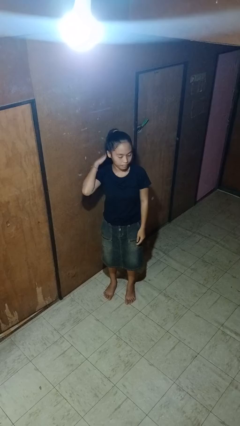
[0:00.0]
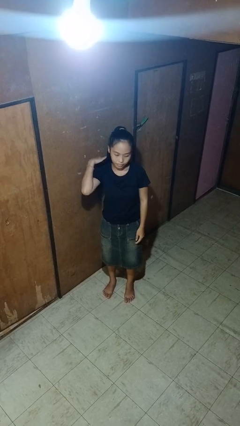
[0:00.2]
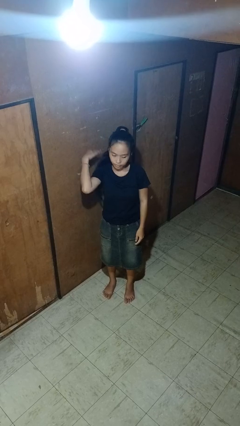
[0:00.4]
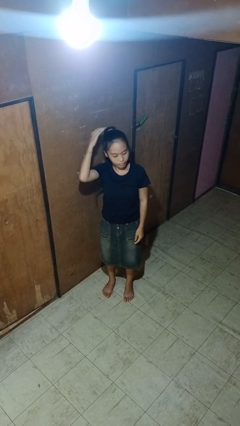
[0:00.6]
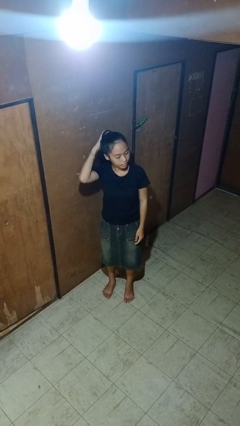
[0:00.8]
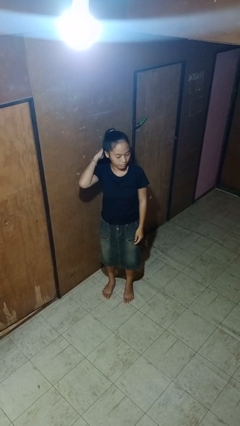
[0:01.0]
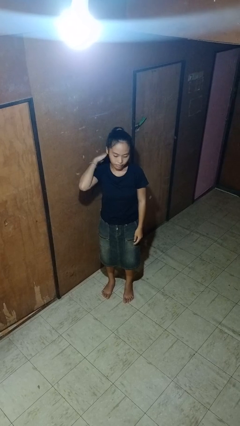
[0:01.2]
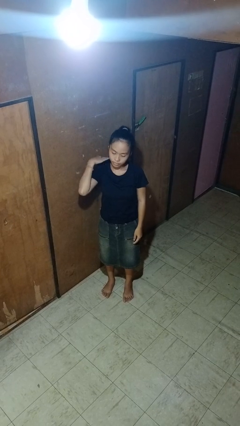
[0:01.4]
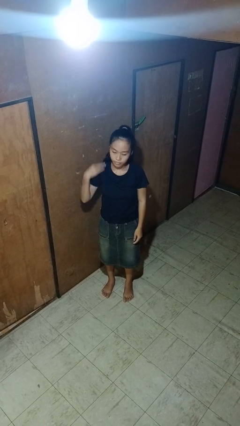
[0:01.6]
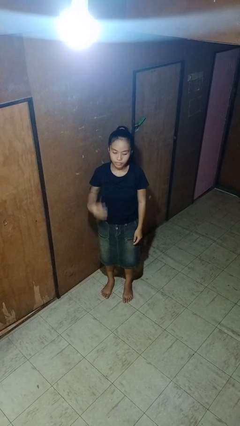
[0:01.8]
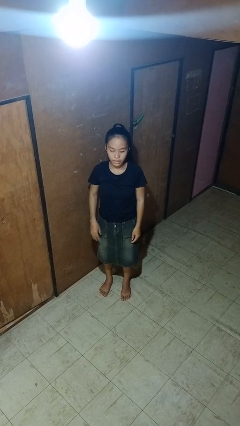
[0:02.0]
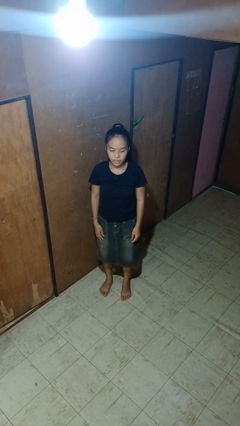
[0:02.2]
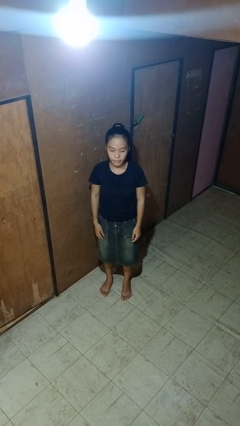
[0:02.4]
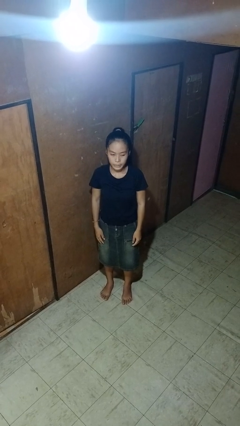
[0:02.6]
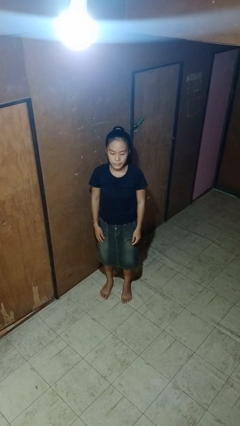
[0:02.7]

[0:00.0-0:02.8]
person strokes hair

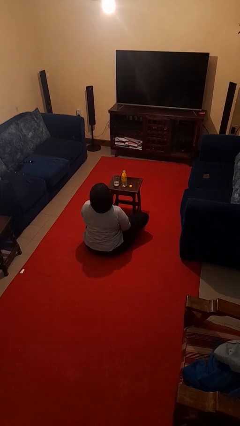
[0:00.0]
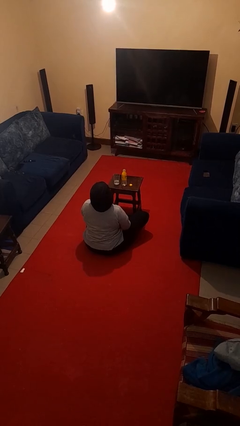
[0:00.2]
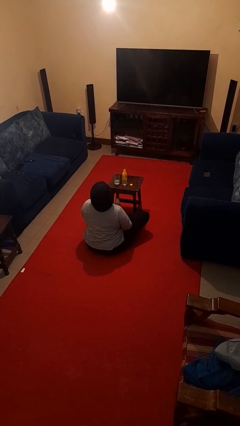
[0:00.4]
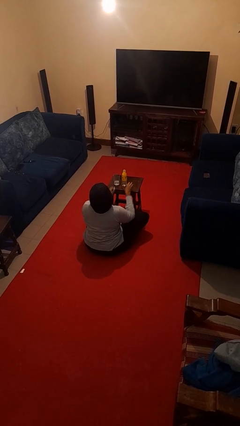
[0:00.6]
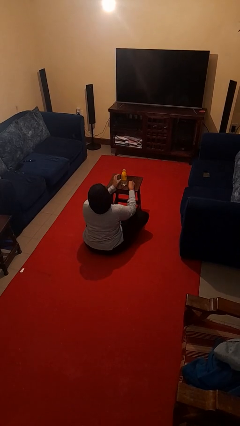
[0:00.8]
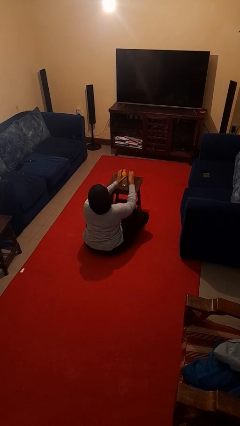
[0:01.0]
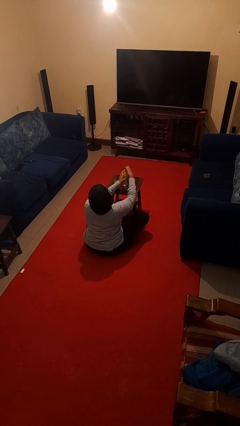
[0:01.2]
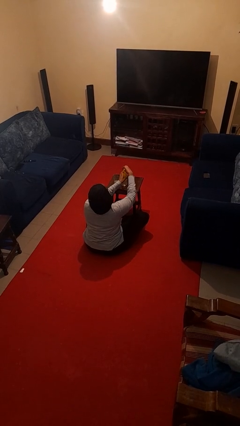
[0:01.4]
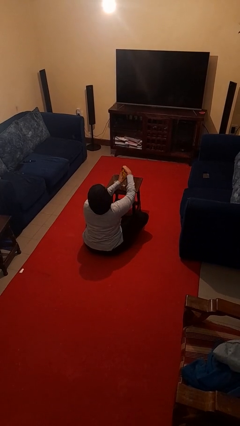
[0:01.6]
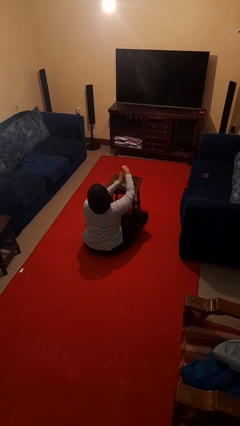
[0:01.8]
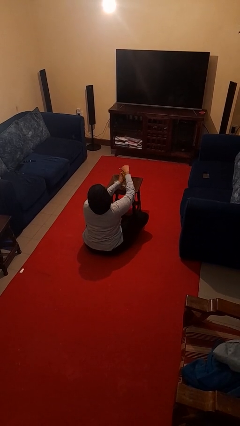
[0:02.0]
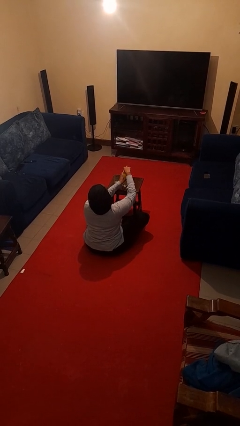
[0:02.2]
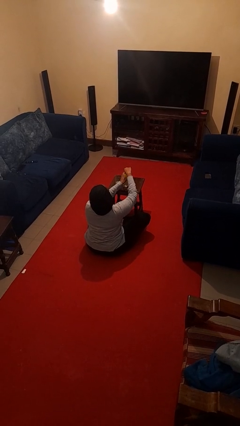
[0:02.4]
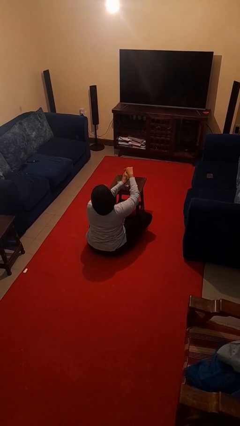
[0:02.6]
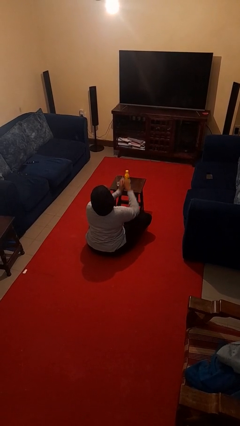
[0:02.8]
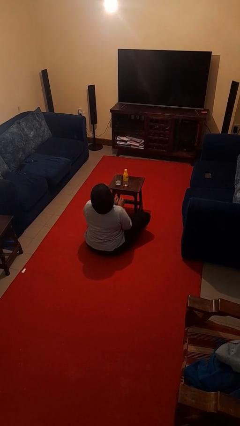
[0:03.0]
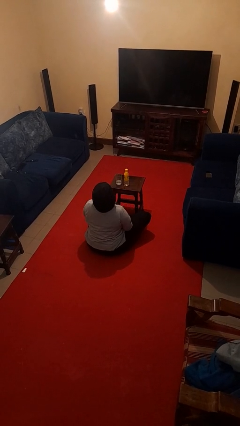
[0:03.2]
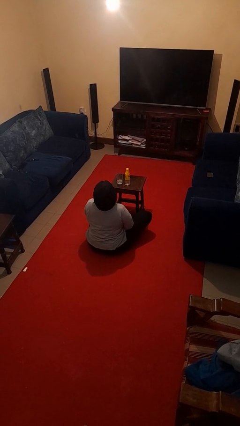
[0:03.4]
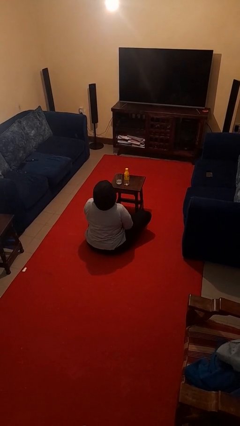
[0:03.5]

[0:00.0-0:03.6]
person screws lid to bottle

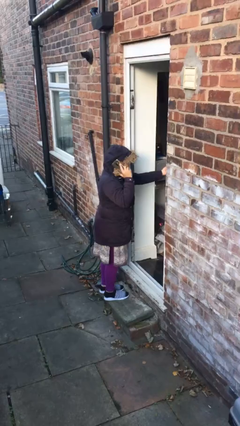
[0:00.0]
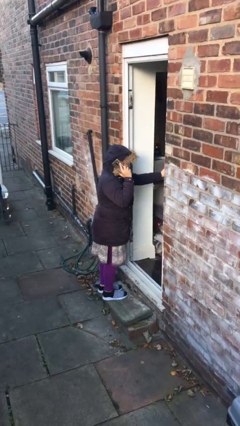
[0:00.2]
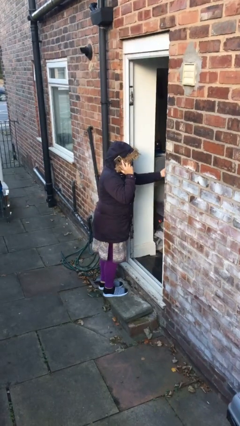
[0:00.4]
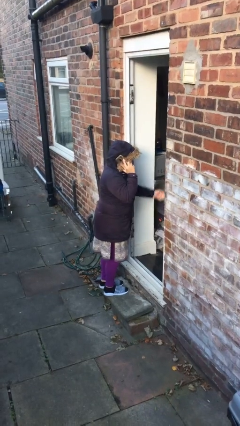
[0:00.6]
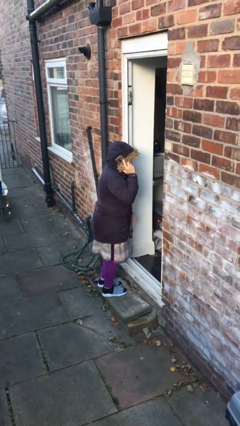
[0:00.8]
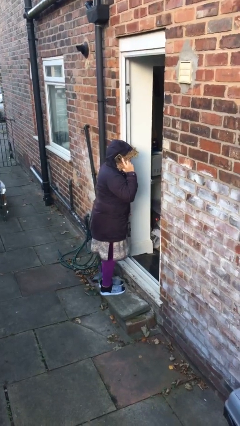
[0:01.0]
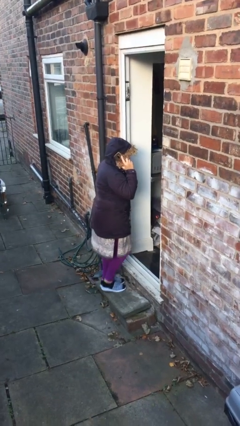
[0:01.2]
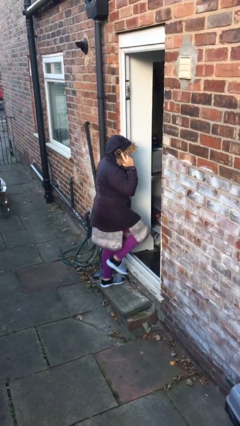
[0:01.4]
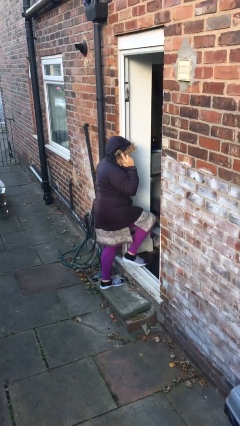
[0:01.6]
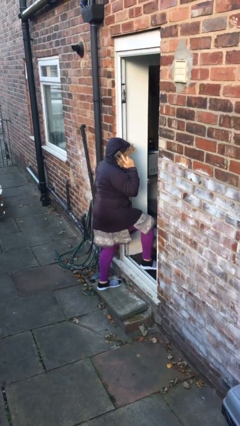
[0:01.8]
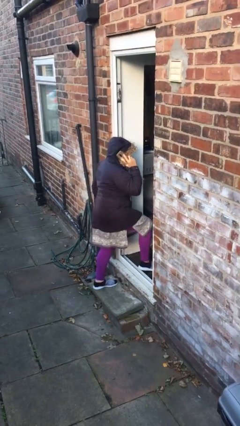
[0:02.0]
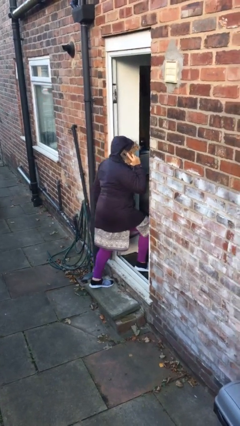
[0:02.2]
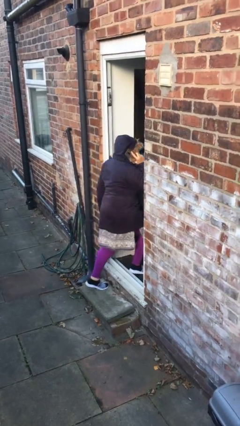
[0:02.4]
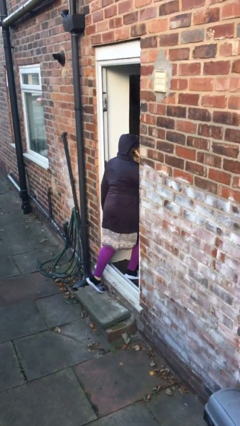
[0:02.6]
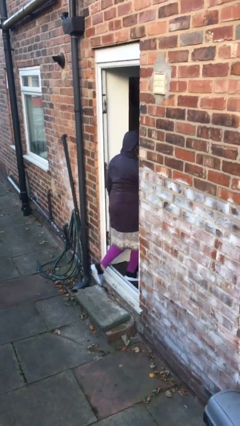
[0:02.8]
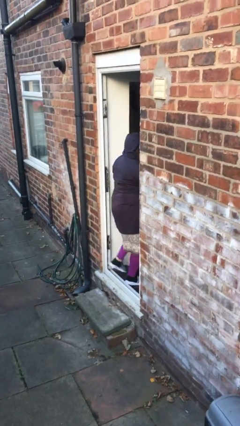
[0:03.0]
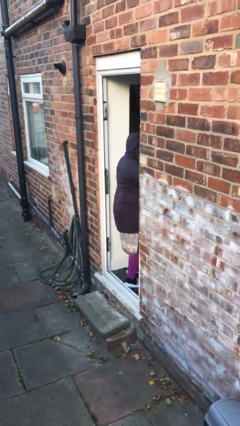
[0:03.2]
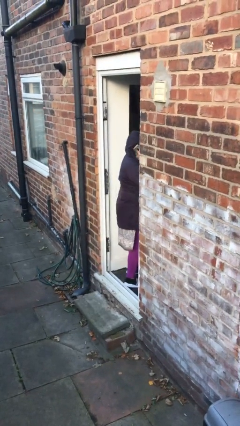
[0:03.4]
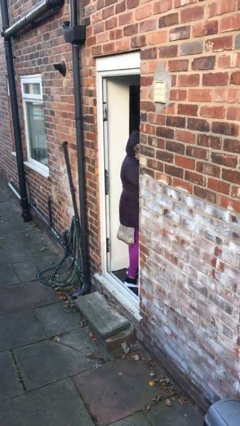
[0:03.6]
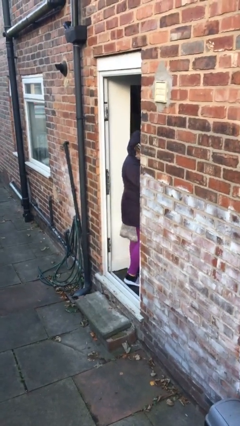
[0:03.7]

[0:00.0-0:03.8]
person exits scene through structure

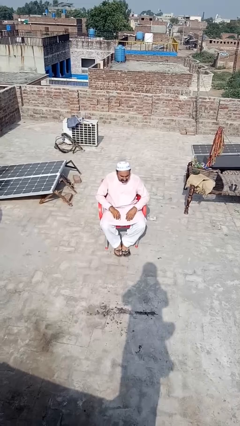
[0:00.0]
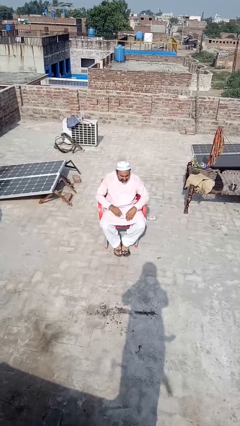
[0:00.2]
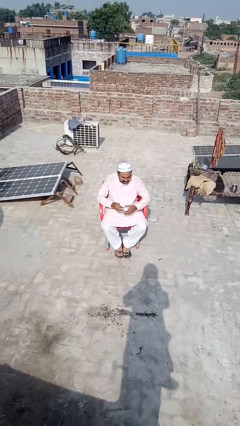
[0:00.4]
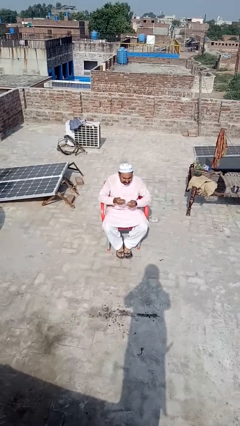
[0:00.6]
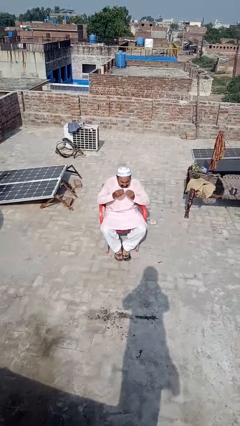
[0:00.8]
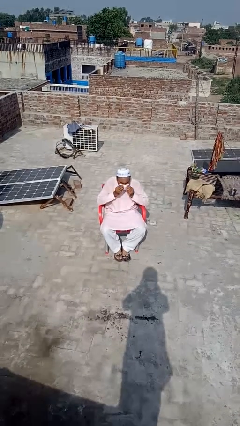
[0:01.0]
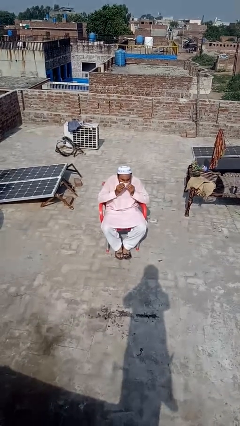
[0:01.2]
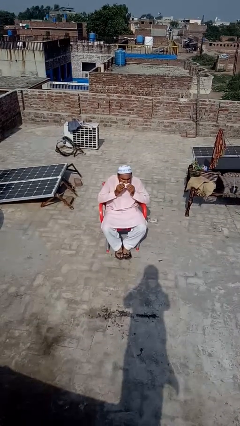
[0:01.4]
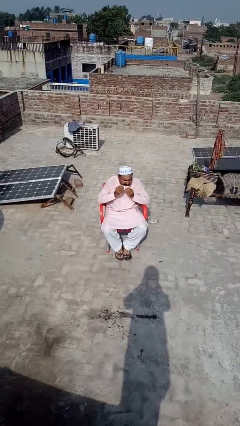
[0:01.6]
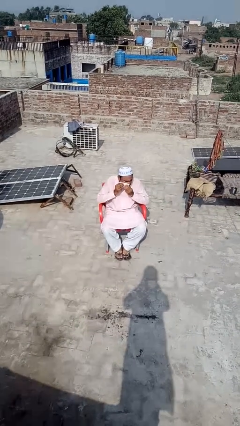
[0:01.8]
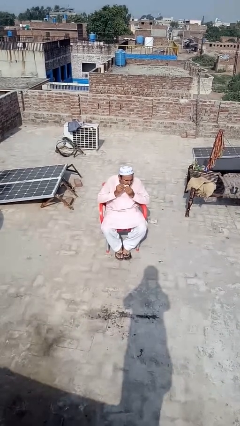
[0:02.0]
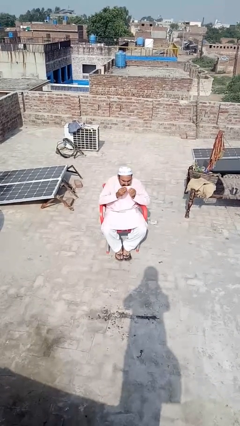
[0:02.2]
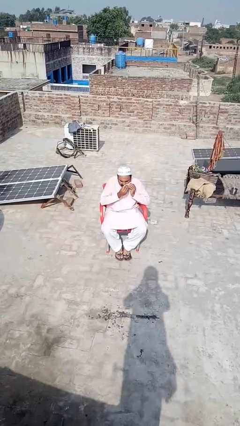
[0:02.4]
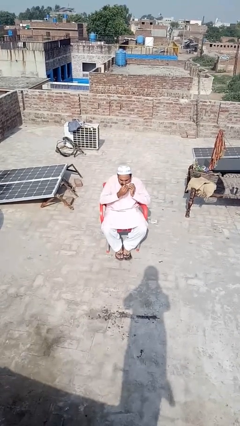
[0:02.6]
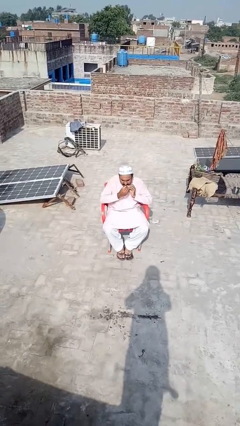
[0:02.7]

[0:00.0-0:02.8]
person wipes mouth with napkin

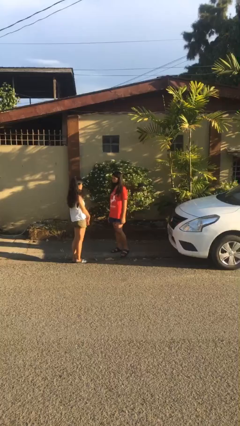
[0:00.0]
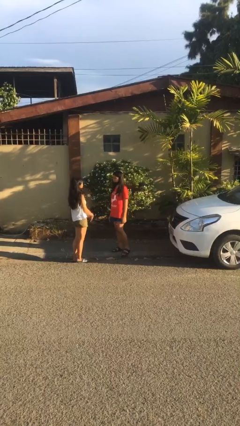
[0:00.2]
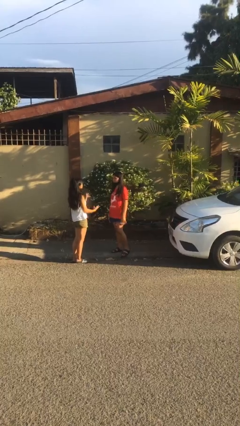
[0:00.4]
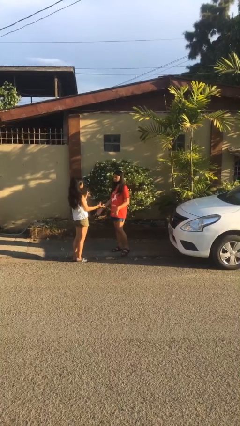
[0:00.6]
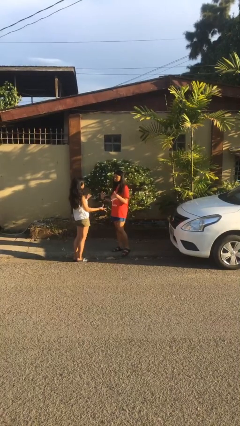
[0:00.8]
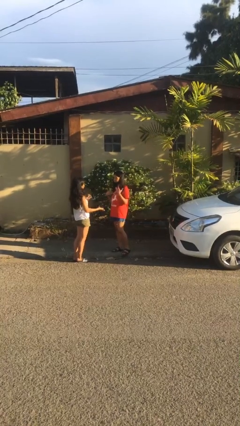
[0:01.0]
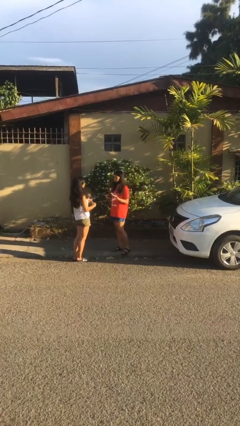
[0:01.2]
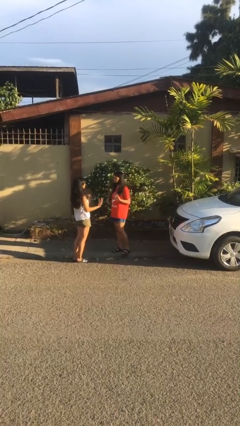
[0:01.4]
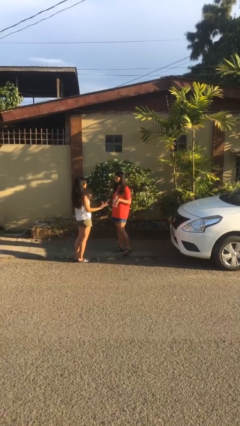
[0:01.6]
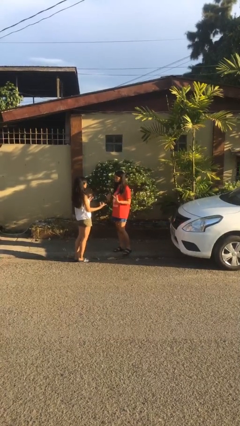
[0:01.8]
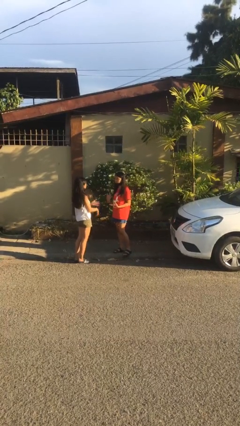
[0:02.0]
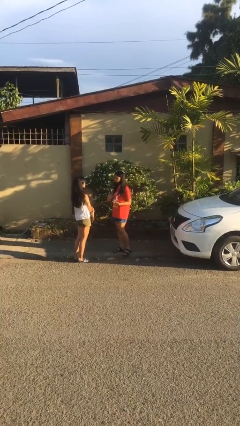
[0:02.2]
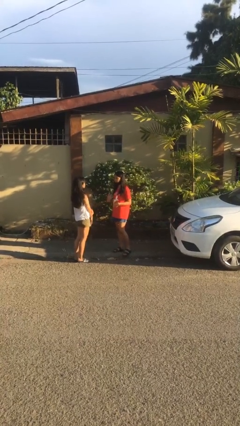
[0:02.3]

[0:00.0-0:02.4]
person talks to person

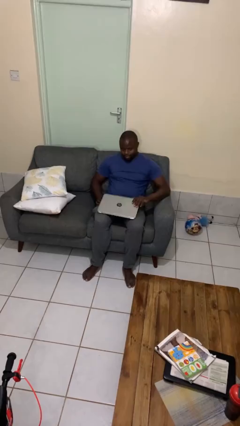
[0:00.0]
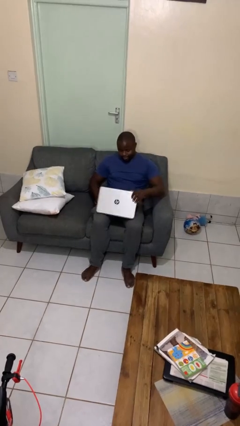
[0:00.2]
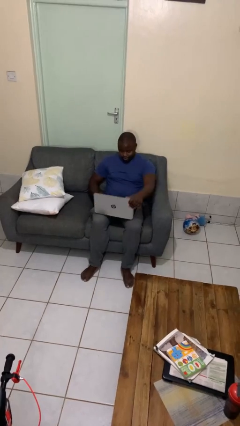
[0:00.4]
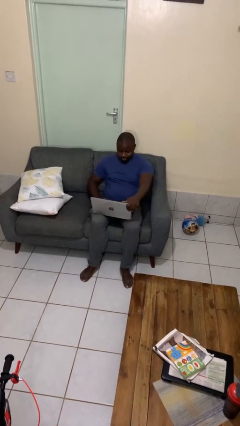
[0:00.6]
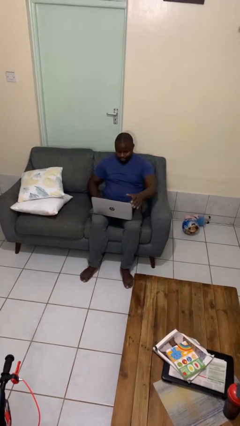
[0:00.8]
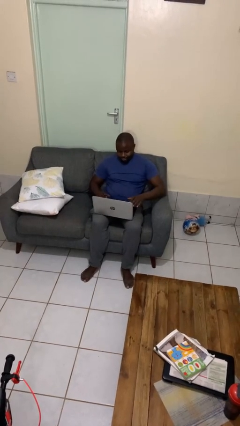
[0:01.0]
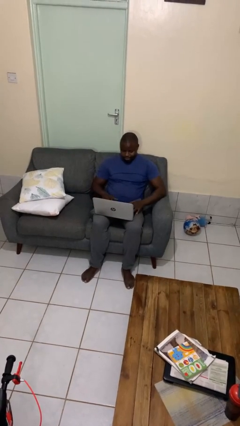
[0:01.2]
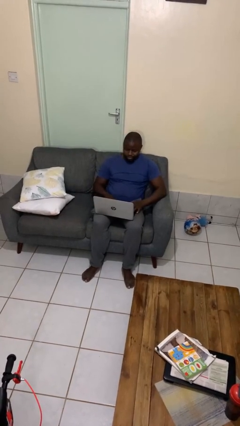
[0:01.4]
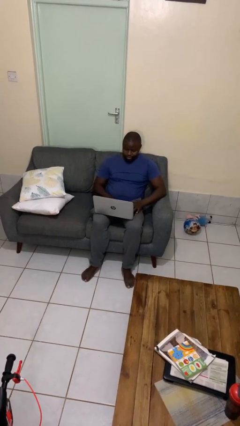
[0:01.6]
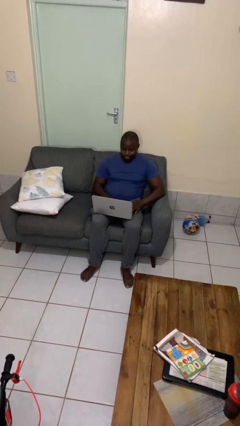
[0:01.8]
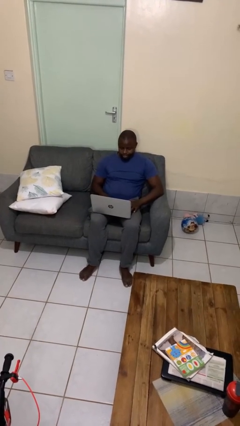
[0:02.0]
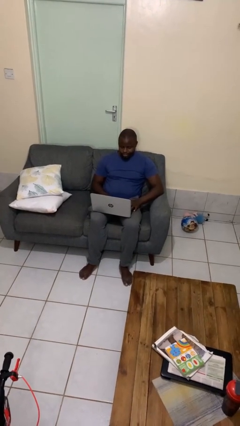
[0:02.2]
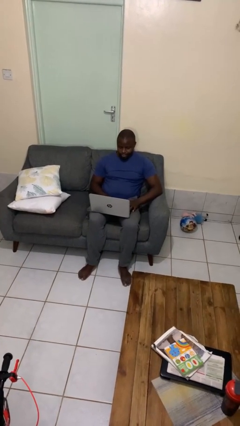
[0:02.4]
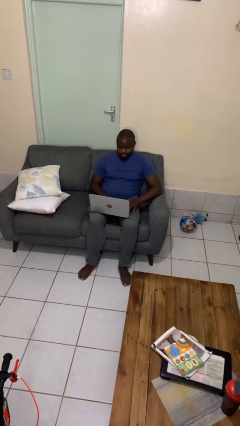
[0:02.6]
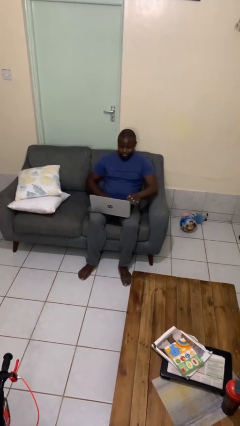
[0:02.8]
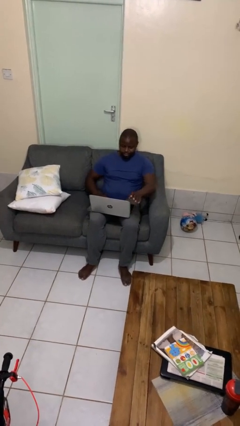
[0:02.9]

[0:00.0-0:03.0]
person opens laptop
